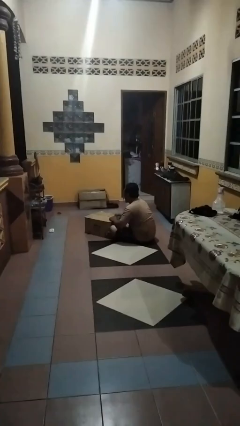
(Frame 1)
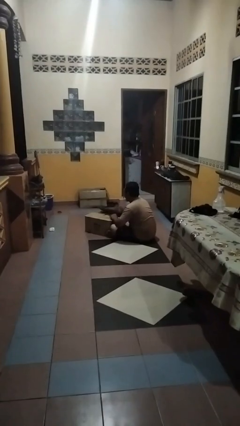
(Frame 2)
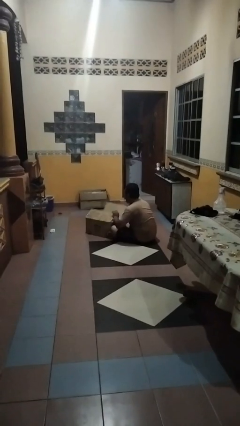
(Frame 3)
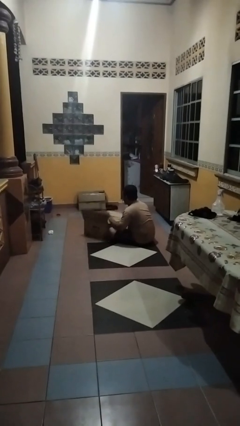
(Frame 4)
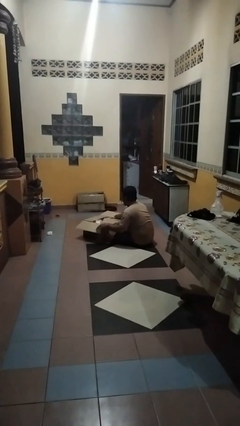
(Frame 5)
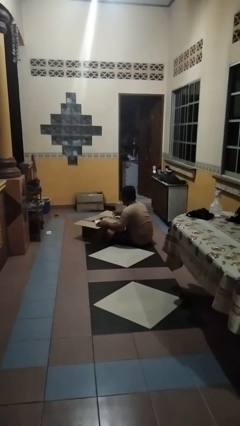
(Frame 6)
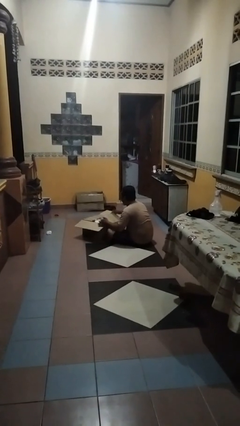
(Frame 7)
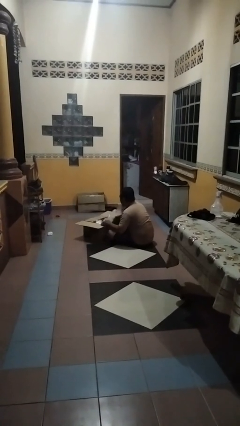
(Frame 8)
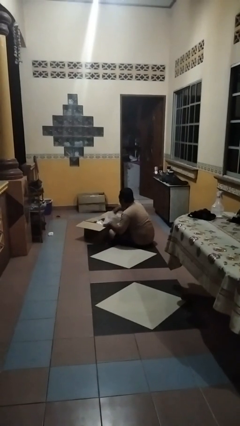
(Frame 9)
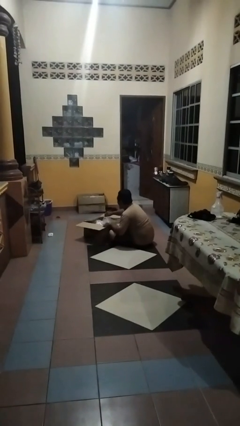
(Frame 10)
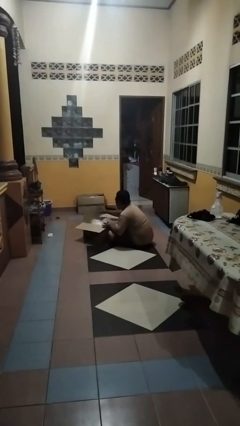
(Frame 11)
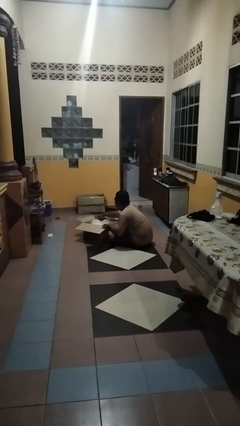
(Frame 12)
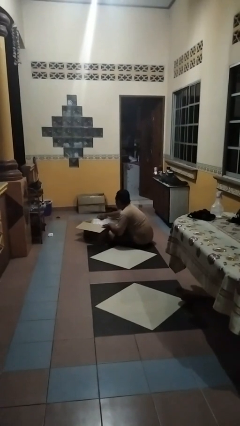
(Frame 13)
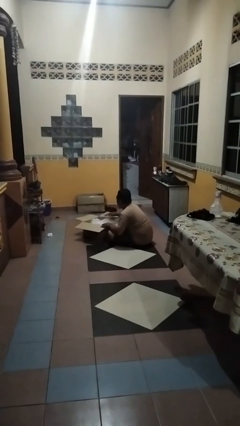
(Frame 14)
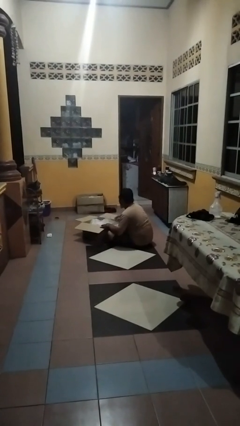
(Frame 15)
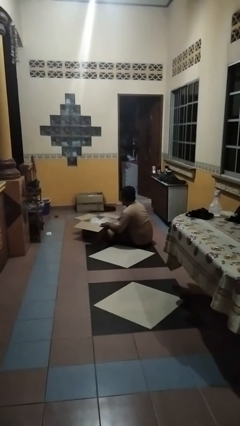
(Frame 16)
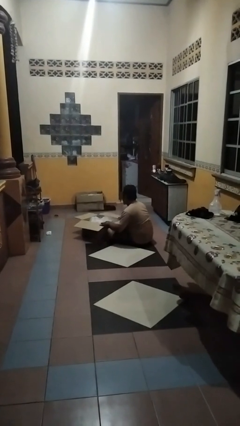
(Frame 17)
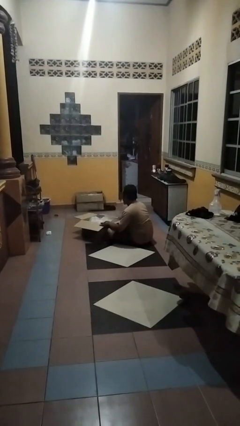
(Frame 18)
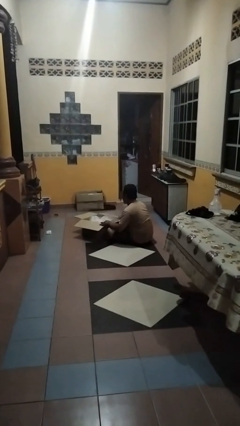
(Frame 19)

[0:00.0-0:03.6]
person opens box

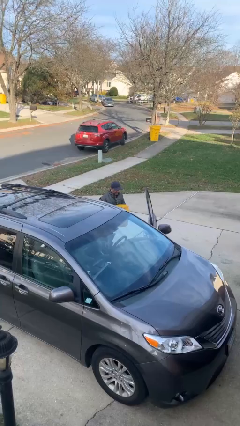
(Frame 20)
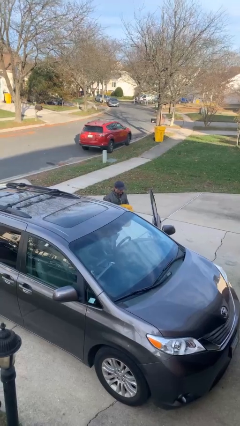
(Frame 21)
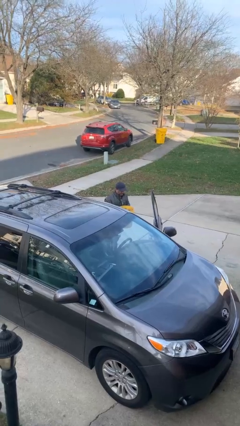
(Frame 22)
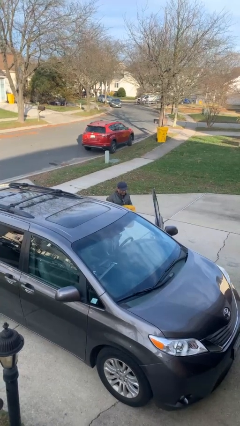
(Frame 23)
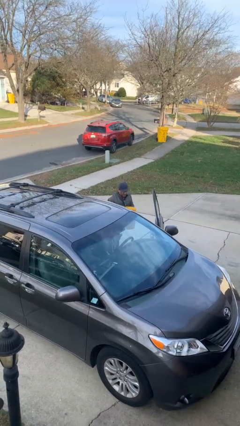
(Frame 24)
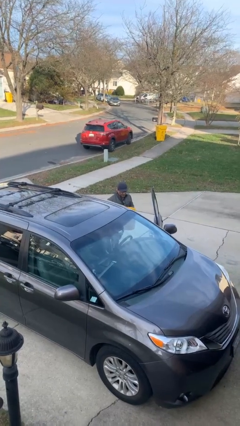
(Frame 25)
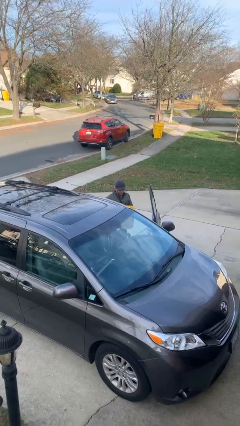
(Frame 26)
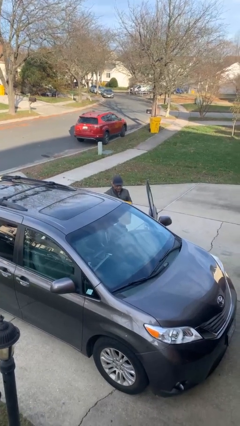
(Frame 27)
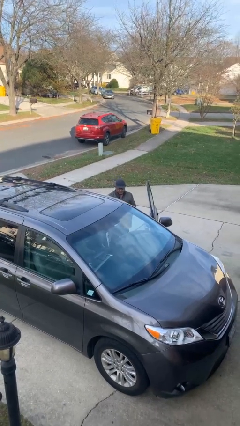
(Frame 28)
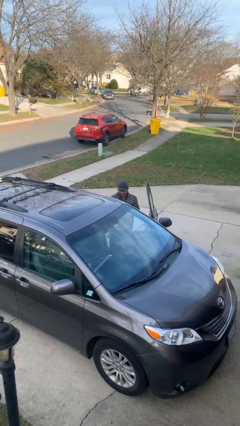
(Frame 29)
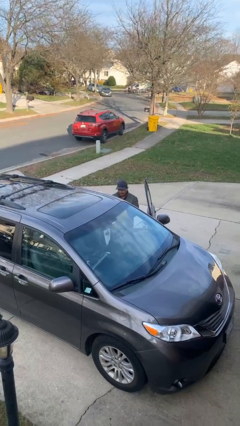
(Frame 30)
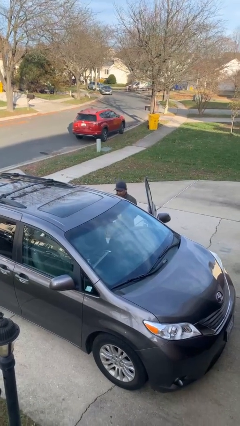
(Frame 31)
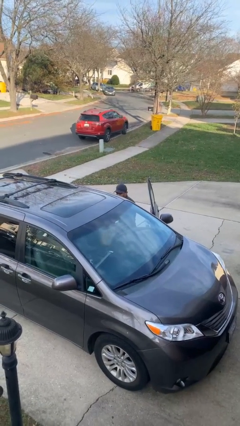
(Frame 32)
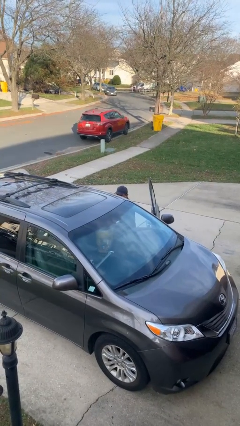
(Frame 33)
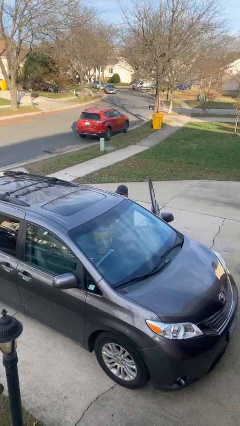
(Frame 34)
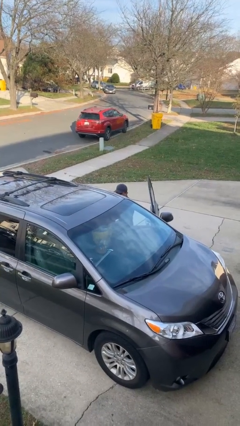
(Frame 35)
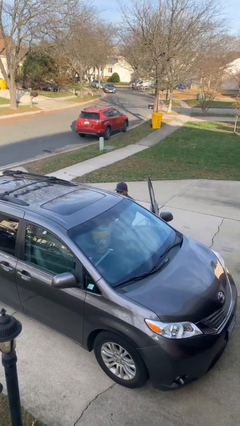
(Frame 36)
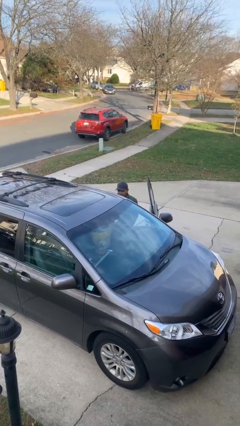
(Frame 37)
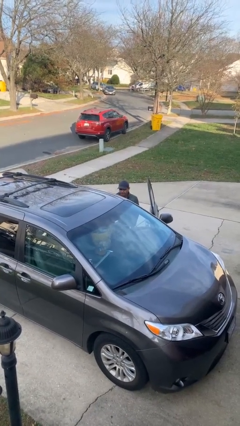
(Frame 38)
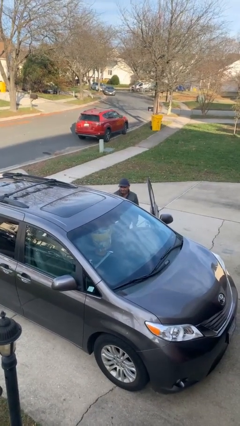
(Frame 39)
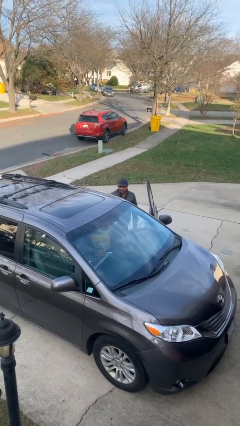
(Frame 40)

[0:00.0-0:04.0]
person loads car

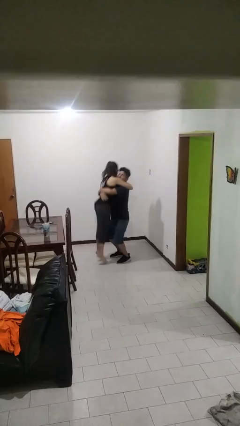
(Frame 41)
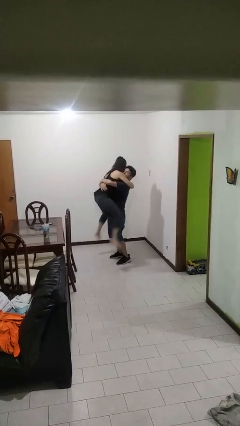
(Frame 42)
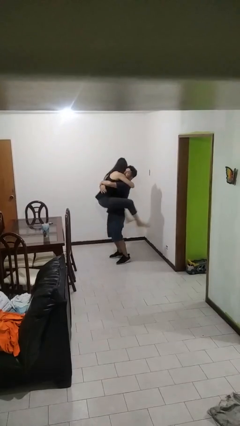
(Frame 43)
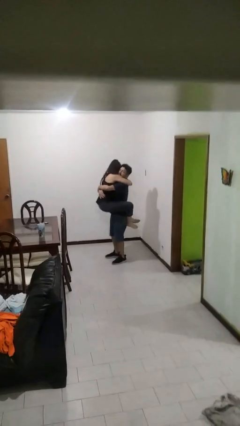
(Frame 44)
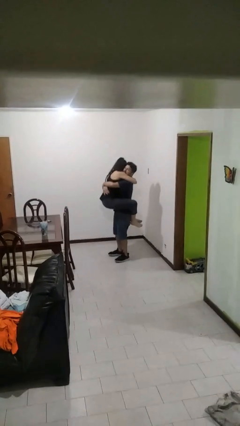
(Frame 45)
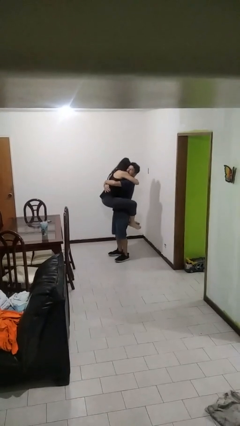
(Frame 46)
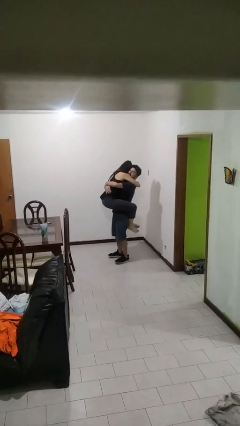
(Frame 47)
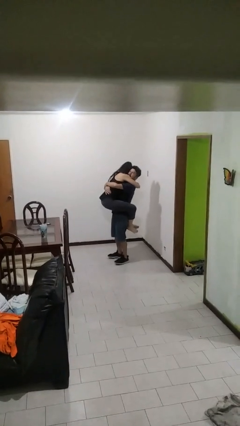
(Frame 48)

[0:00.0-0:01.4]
person picks up person

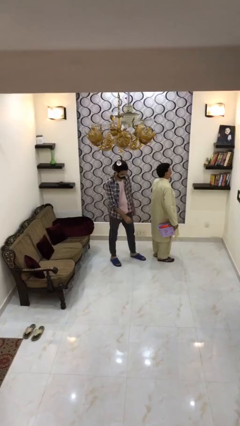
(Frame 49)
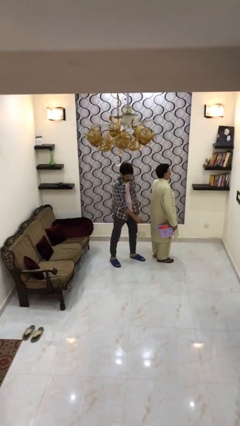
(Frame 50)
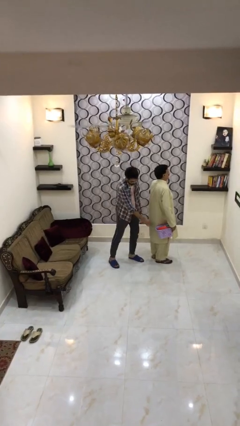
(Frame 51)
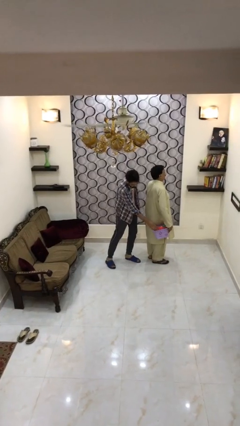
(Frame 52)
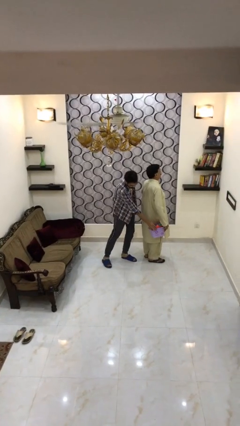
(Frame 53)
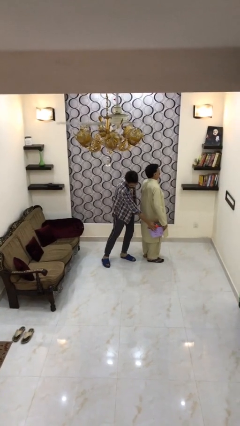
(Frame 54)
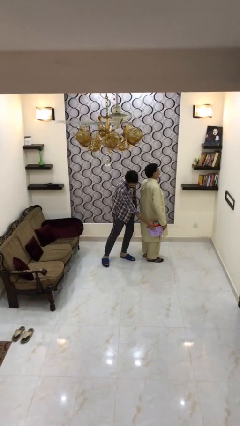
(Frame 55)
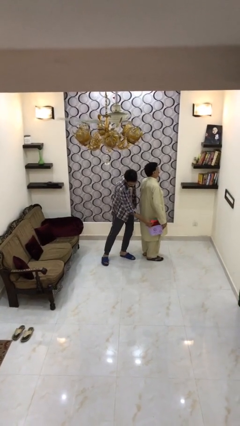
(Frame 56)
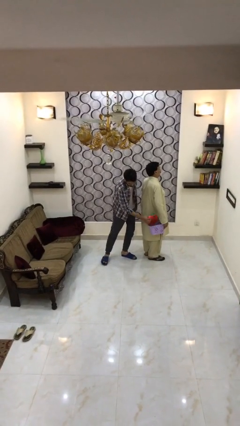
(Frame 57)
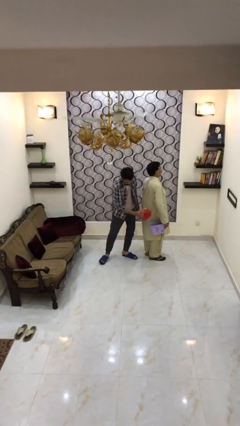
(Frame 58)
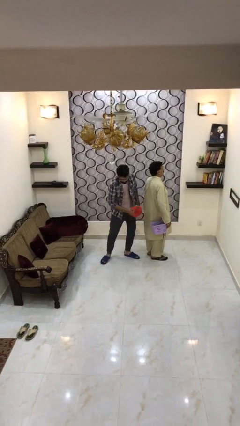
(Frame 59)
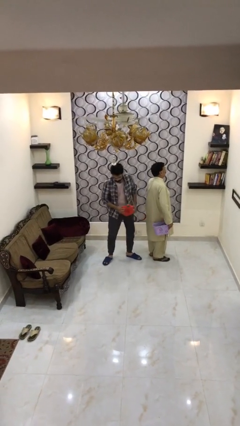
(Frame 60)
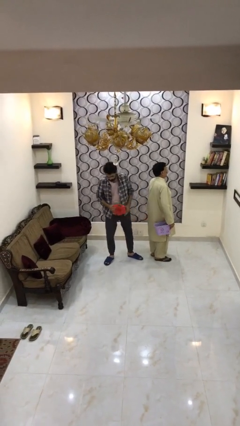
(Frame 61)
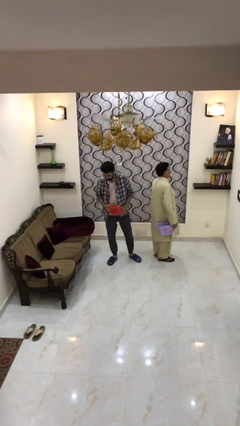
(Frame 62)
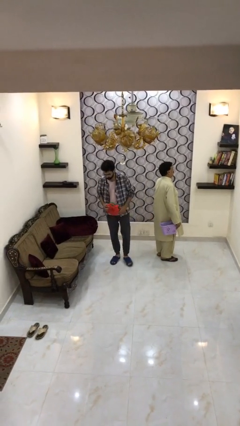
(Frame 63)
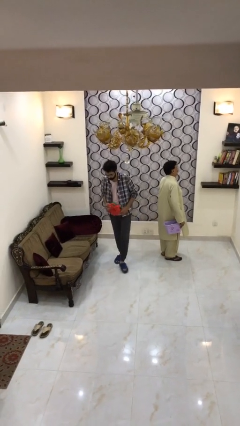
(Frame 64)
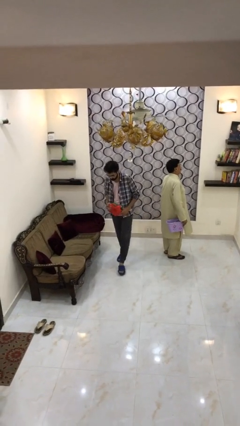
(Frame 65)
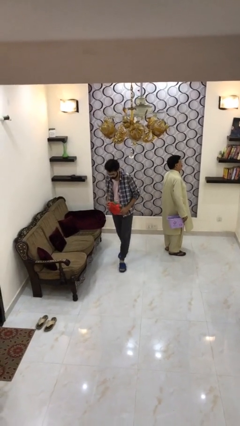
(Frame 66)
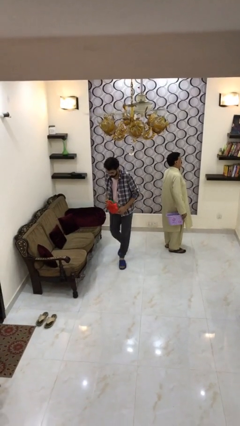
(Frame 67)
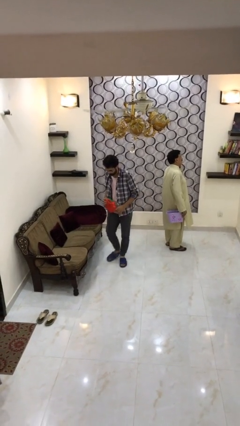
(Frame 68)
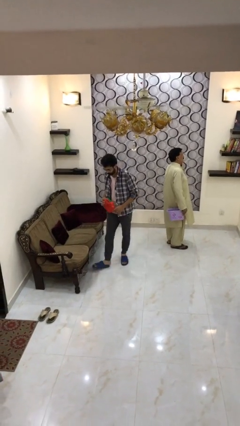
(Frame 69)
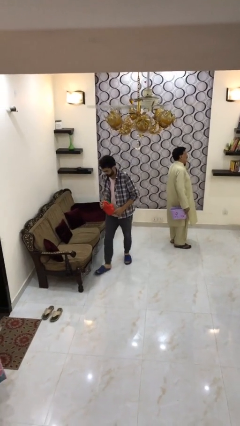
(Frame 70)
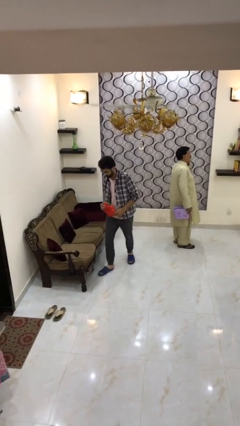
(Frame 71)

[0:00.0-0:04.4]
person steals object from person

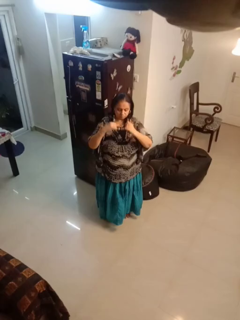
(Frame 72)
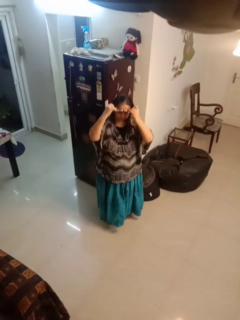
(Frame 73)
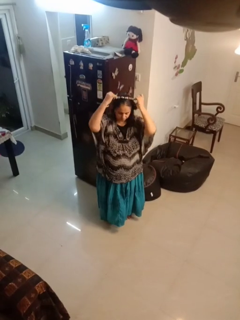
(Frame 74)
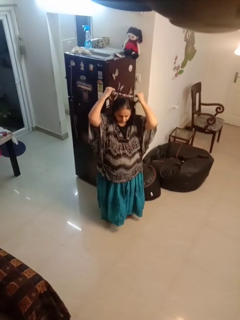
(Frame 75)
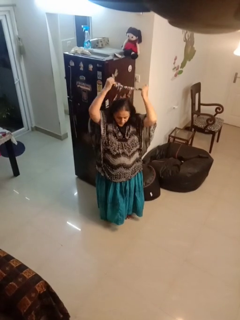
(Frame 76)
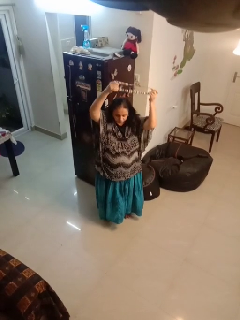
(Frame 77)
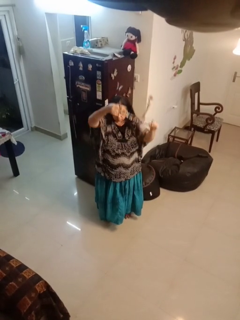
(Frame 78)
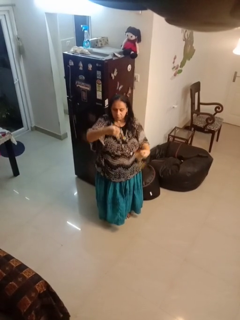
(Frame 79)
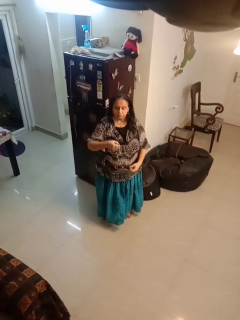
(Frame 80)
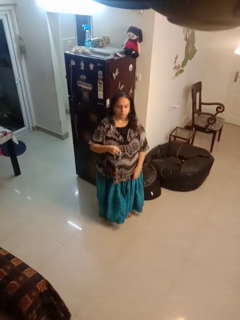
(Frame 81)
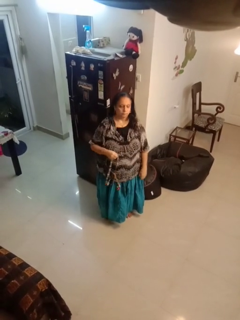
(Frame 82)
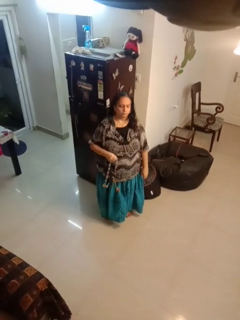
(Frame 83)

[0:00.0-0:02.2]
person takes off necklace

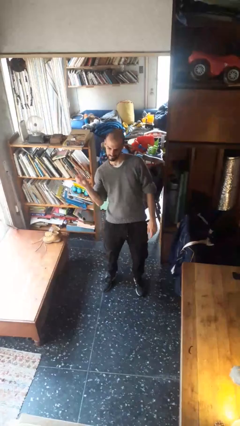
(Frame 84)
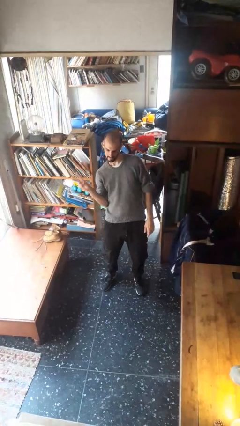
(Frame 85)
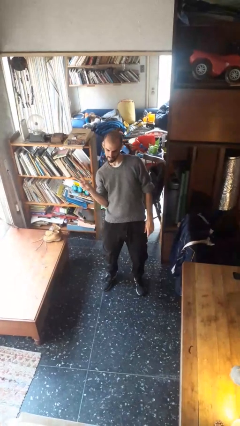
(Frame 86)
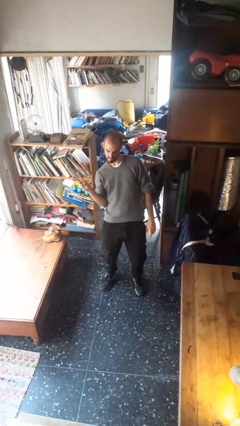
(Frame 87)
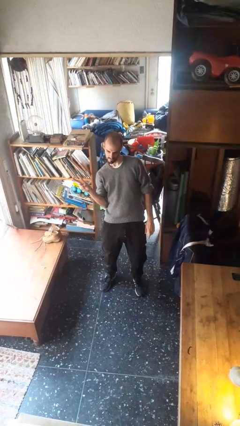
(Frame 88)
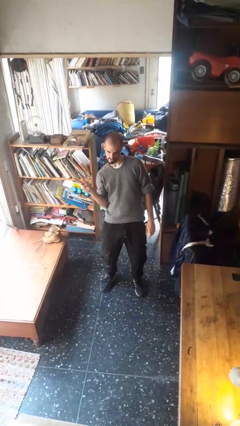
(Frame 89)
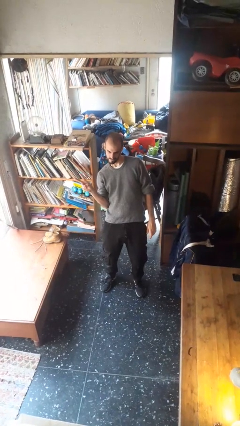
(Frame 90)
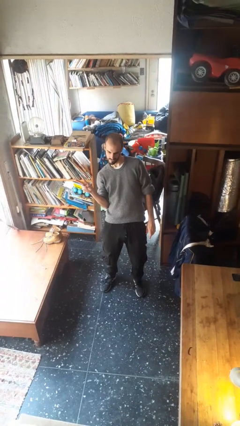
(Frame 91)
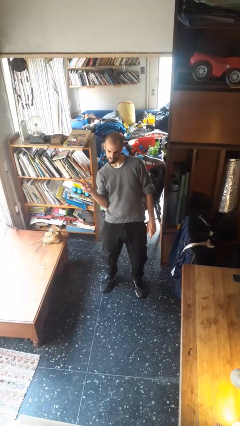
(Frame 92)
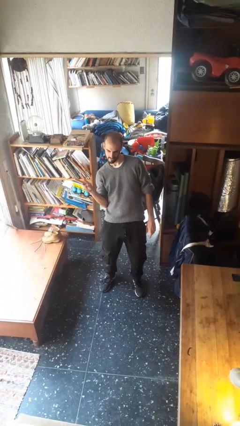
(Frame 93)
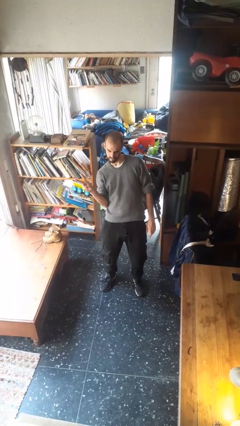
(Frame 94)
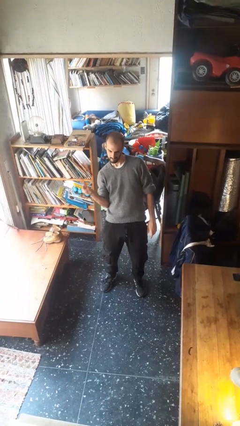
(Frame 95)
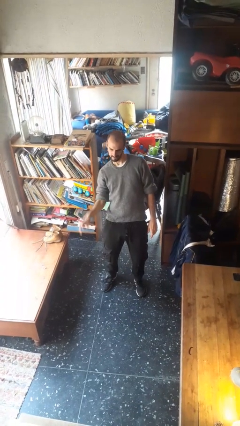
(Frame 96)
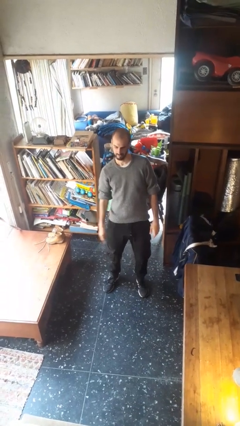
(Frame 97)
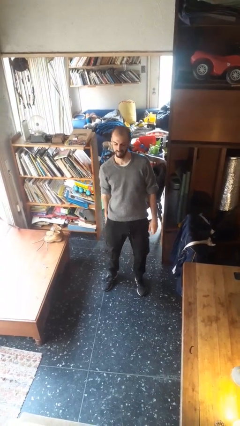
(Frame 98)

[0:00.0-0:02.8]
person gestures peace
